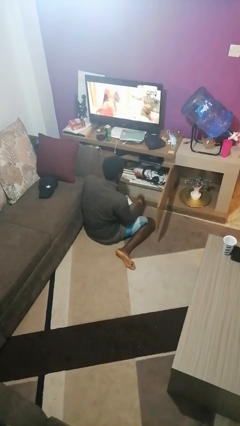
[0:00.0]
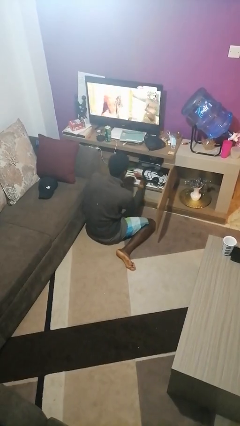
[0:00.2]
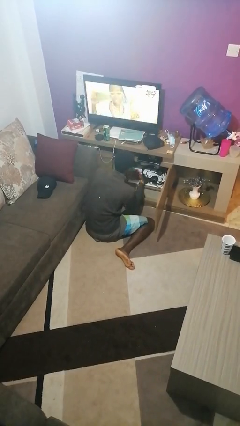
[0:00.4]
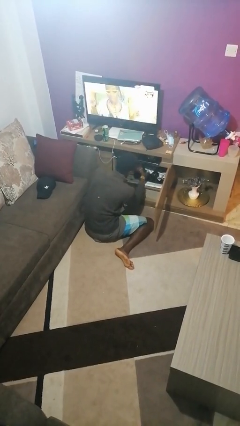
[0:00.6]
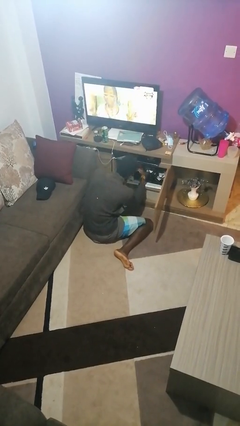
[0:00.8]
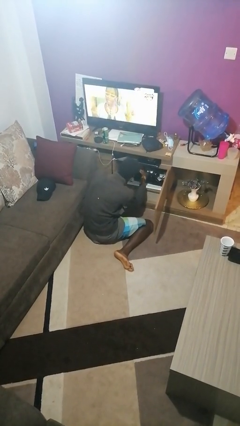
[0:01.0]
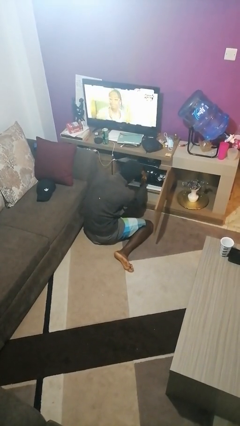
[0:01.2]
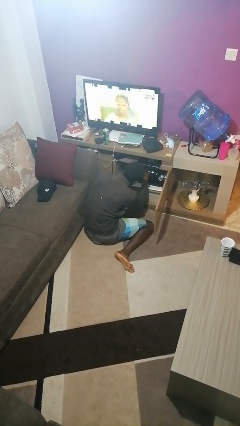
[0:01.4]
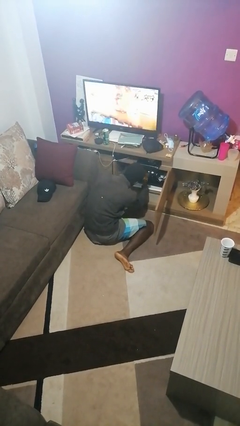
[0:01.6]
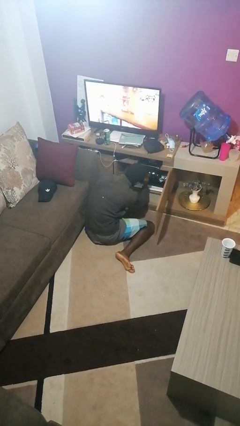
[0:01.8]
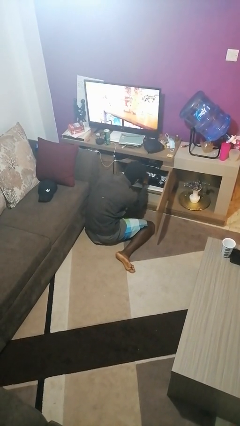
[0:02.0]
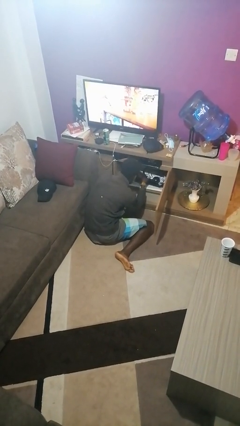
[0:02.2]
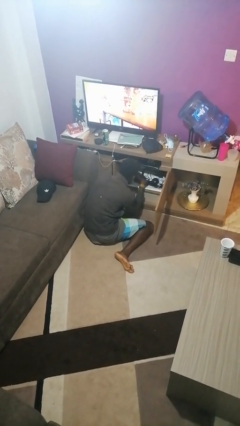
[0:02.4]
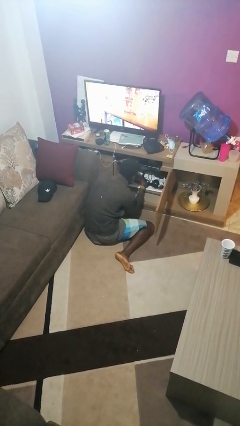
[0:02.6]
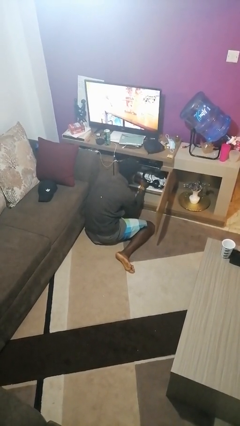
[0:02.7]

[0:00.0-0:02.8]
person searches in cabinet

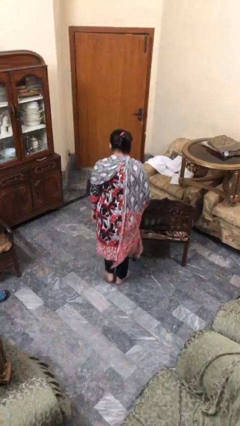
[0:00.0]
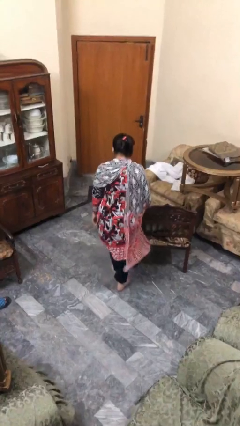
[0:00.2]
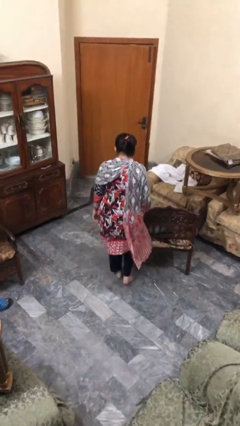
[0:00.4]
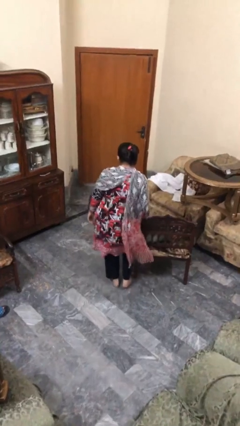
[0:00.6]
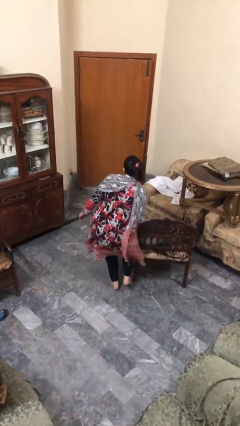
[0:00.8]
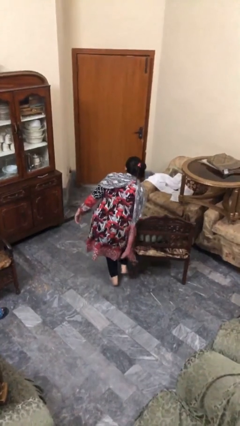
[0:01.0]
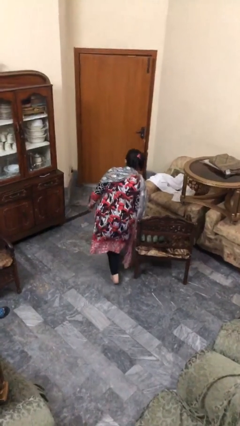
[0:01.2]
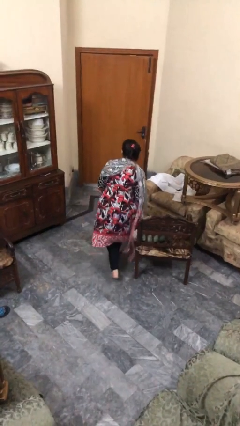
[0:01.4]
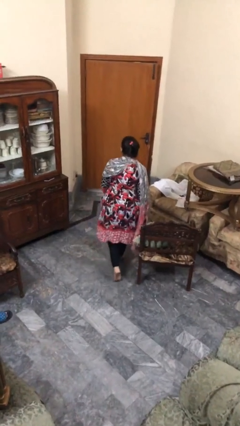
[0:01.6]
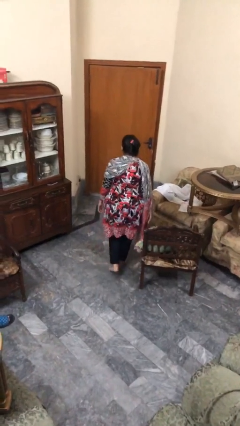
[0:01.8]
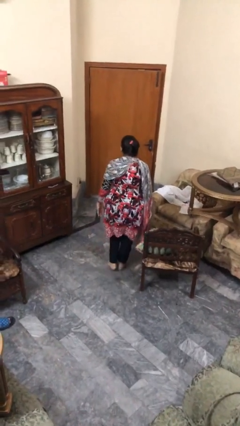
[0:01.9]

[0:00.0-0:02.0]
person stubs toe

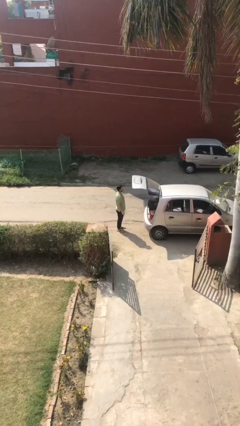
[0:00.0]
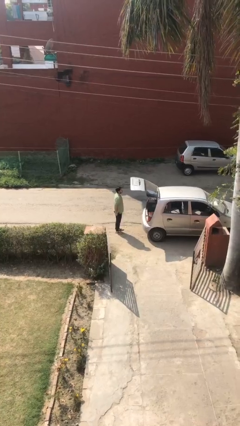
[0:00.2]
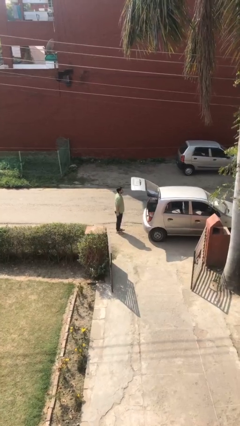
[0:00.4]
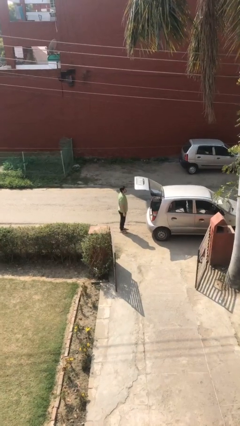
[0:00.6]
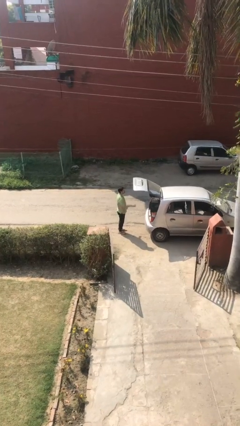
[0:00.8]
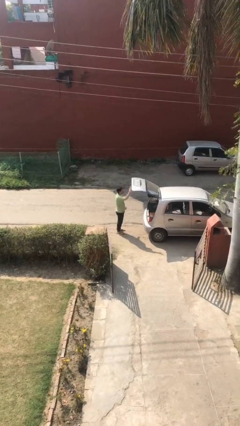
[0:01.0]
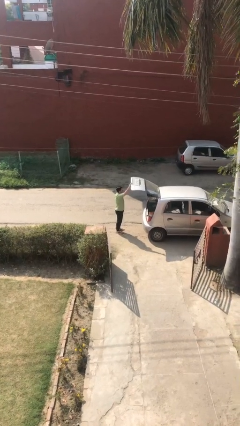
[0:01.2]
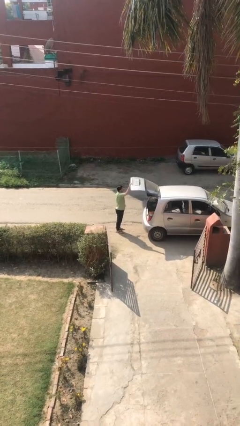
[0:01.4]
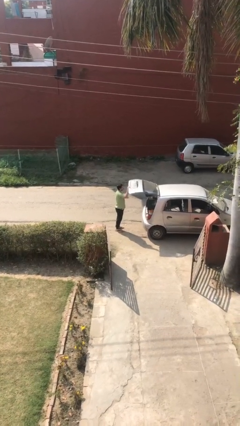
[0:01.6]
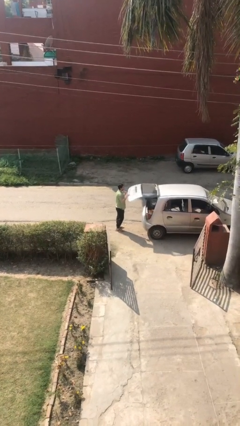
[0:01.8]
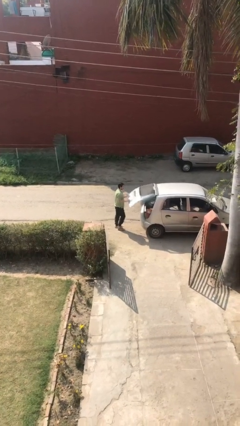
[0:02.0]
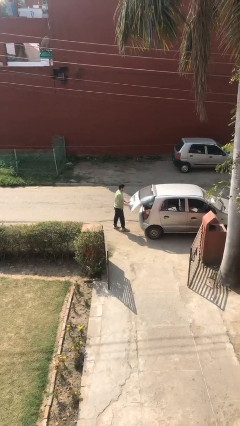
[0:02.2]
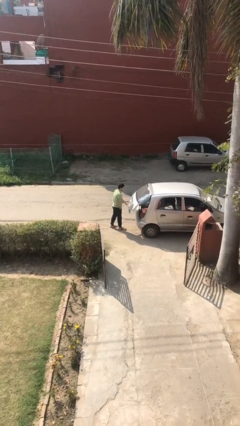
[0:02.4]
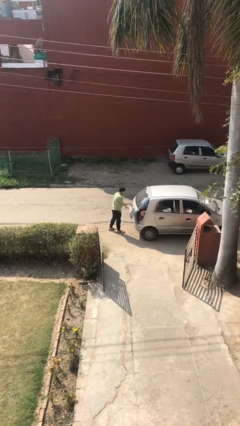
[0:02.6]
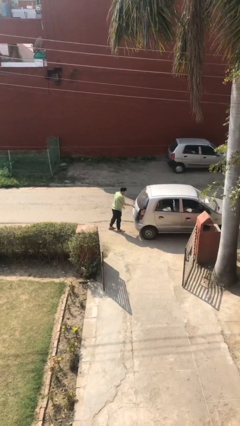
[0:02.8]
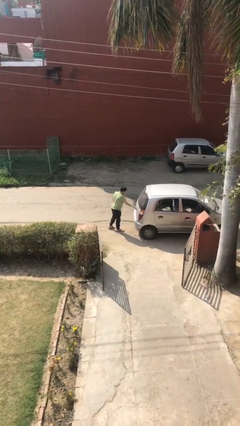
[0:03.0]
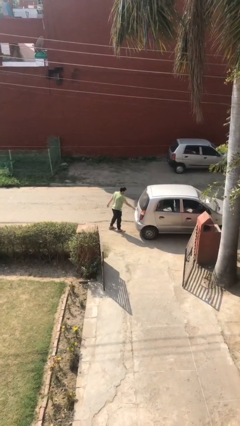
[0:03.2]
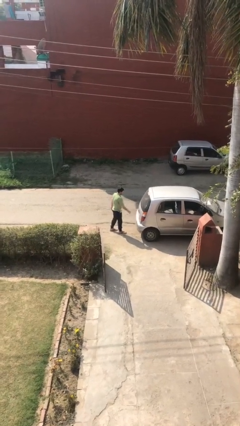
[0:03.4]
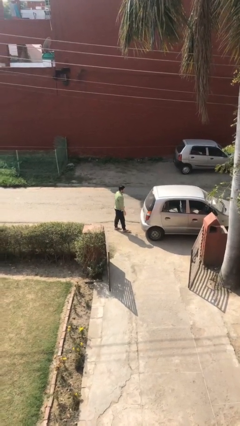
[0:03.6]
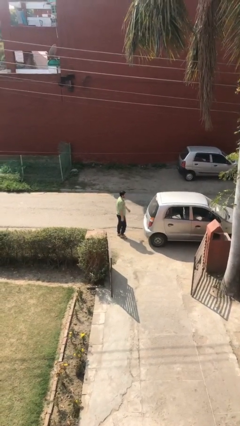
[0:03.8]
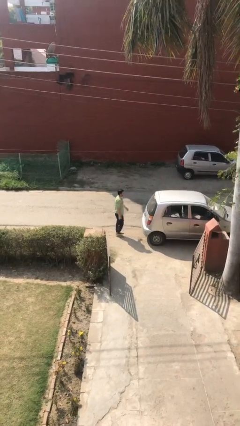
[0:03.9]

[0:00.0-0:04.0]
person closes car trunk

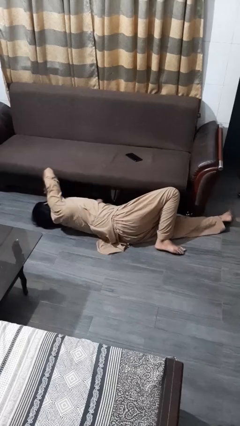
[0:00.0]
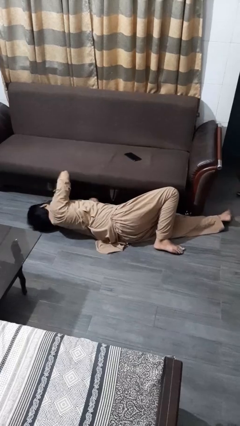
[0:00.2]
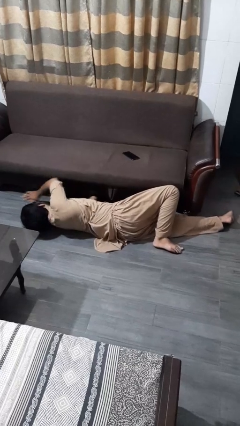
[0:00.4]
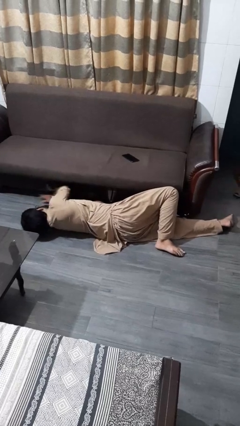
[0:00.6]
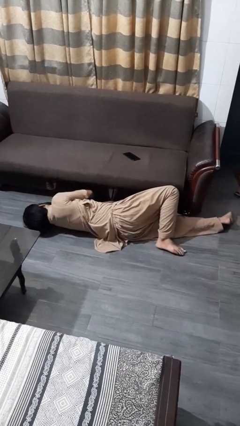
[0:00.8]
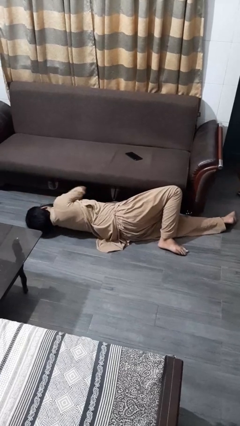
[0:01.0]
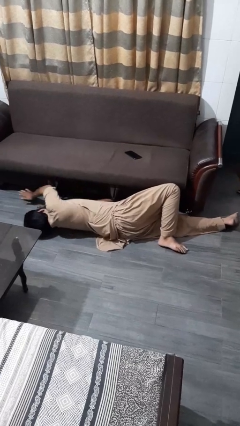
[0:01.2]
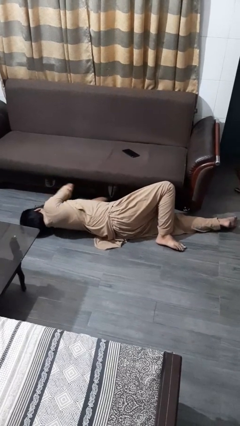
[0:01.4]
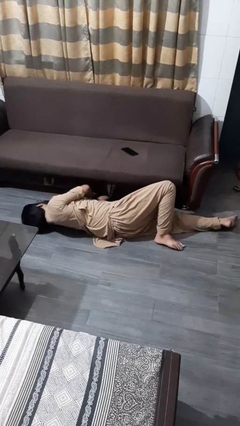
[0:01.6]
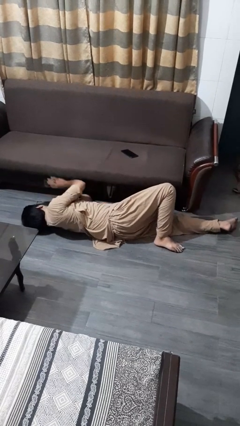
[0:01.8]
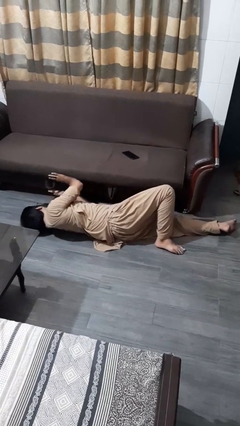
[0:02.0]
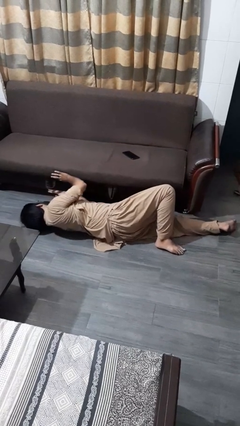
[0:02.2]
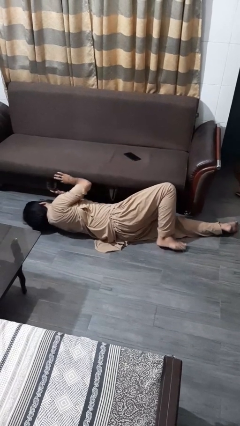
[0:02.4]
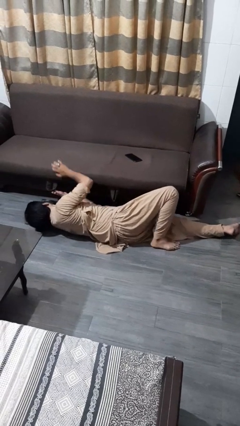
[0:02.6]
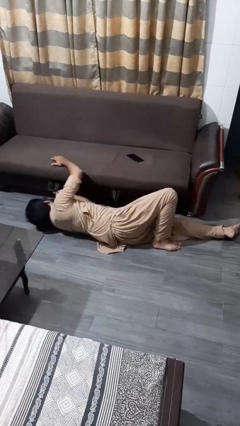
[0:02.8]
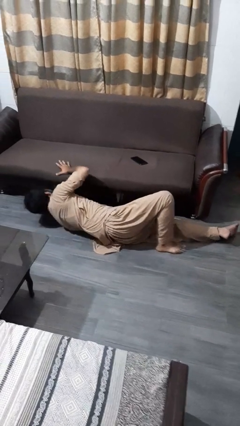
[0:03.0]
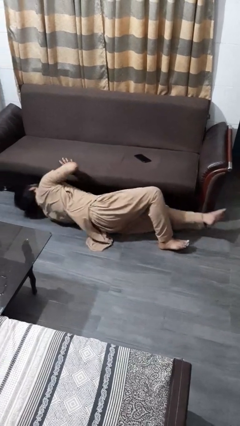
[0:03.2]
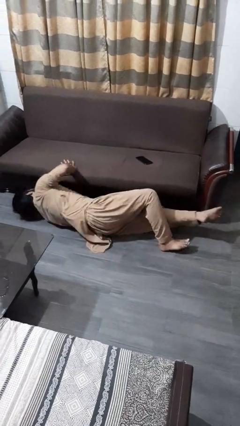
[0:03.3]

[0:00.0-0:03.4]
person searches under couch

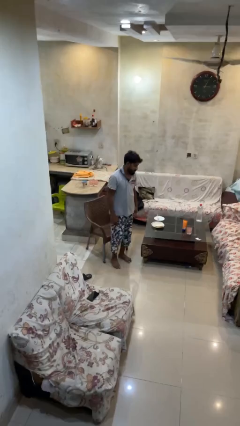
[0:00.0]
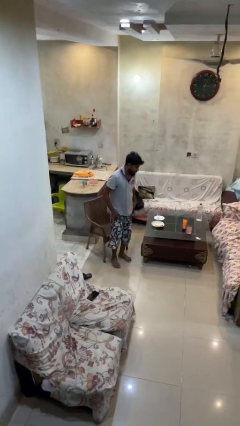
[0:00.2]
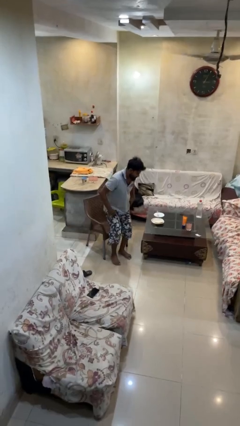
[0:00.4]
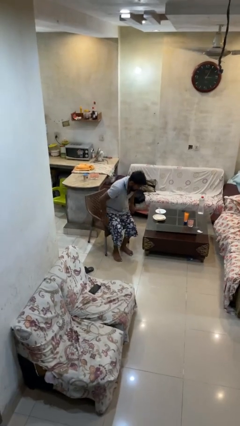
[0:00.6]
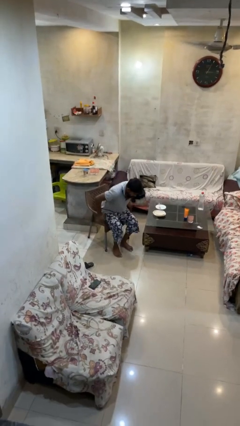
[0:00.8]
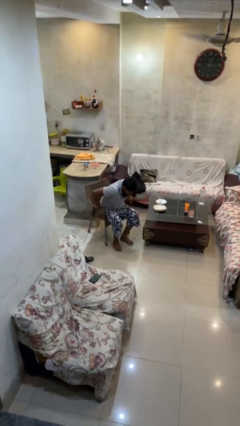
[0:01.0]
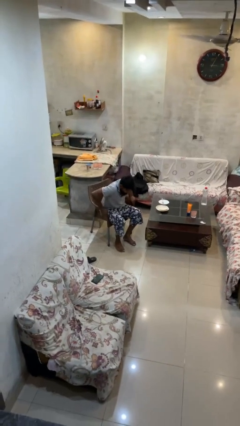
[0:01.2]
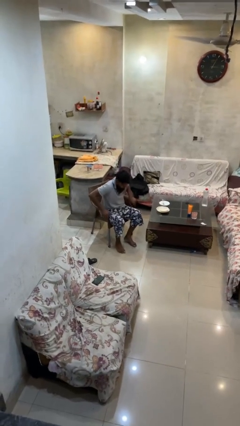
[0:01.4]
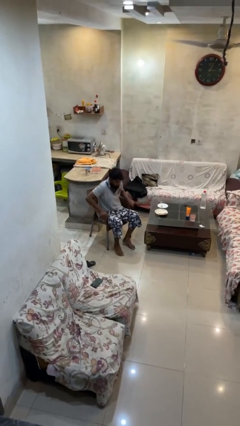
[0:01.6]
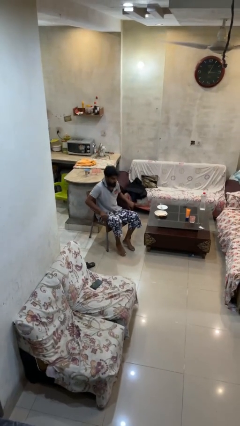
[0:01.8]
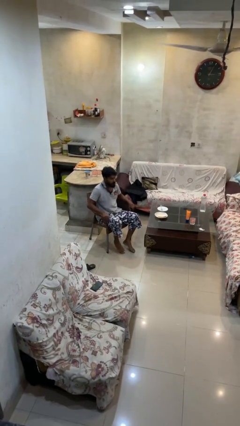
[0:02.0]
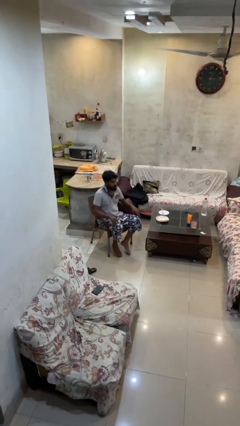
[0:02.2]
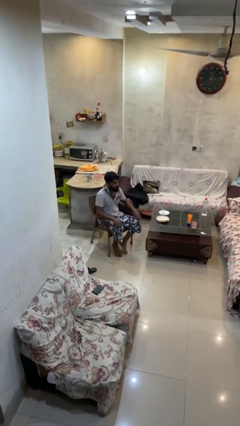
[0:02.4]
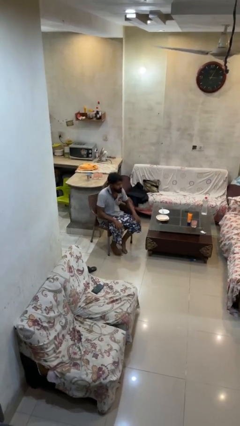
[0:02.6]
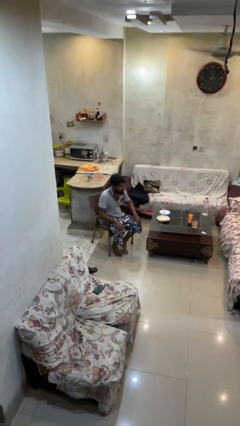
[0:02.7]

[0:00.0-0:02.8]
person sits down

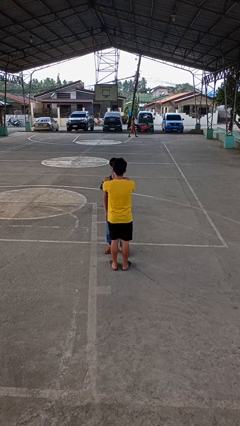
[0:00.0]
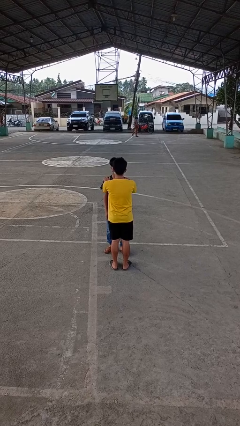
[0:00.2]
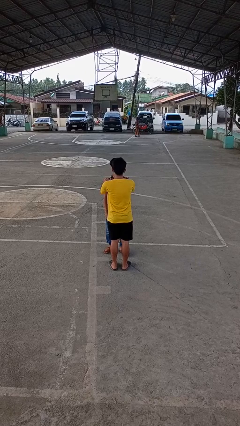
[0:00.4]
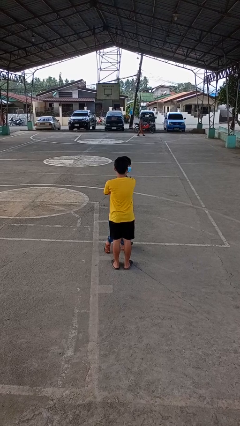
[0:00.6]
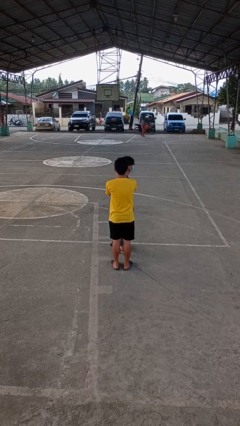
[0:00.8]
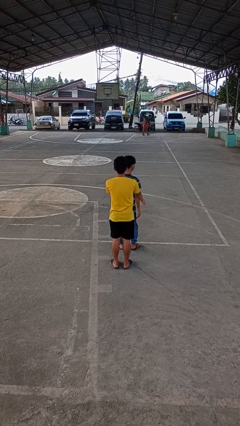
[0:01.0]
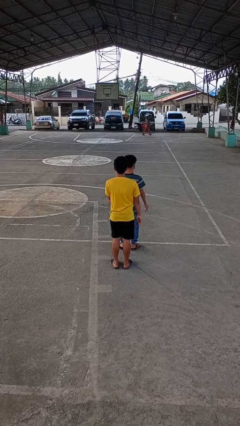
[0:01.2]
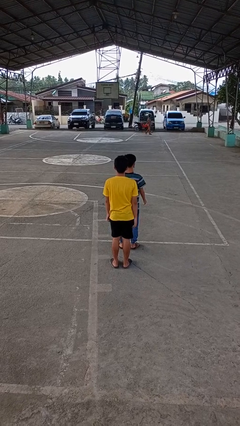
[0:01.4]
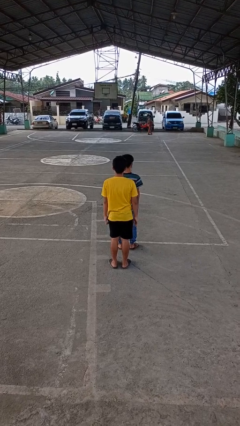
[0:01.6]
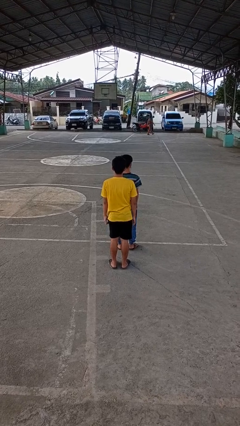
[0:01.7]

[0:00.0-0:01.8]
person spins person around
